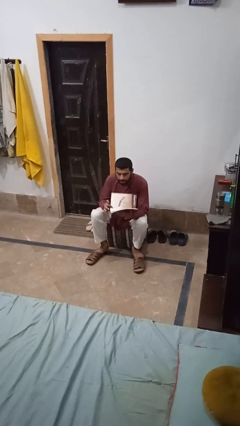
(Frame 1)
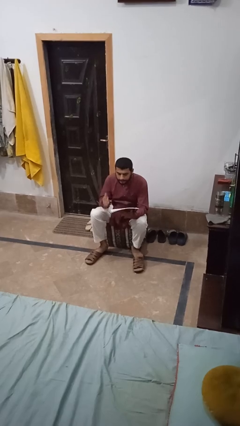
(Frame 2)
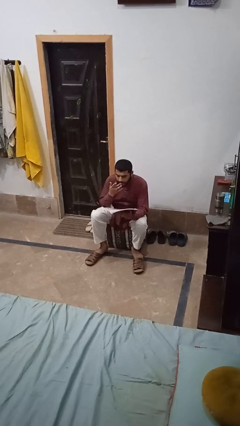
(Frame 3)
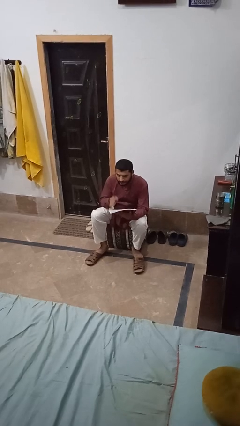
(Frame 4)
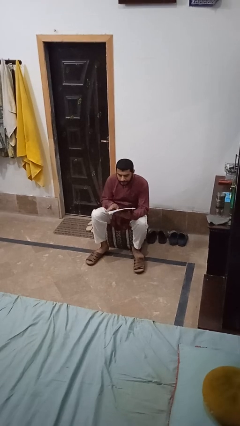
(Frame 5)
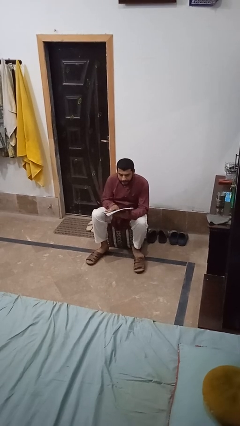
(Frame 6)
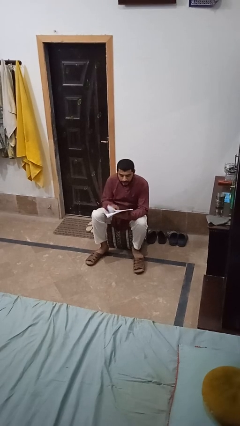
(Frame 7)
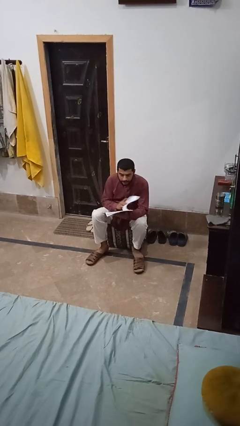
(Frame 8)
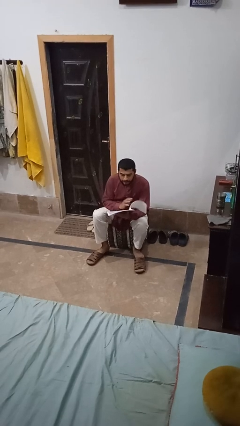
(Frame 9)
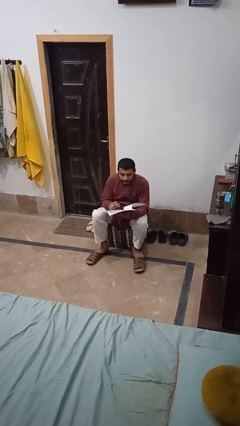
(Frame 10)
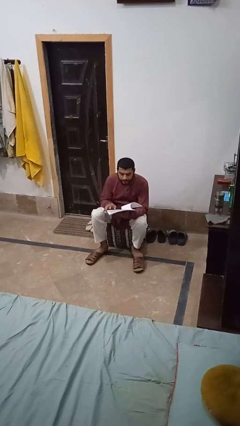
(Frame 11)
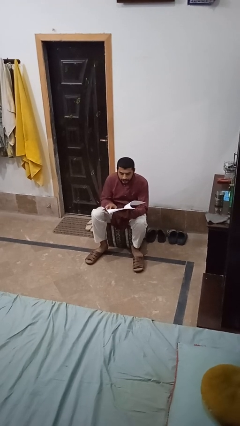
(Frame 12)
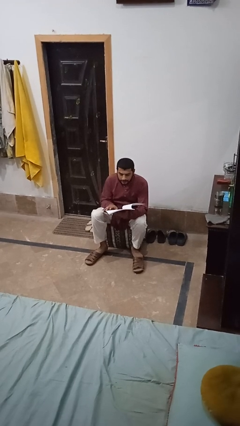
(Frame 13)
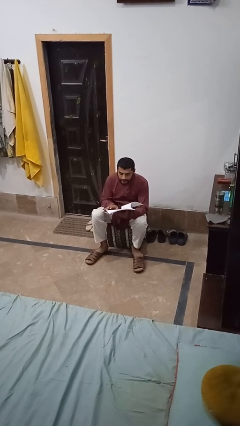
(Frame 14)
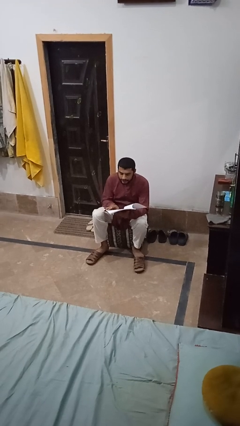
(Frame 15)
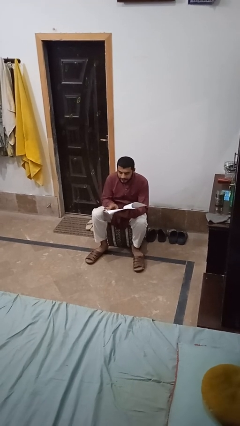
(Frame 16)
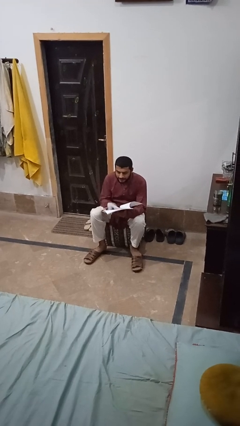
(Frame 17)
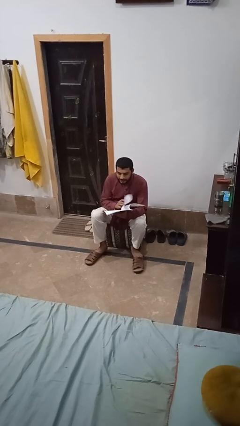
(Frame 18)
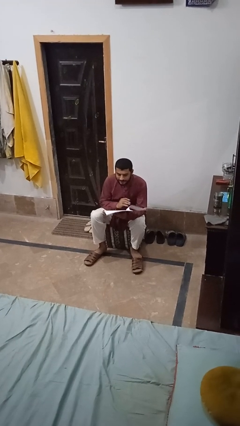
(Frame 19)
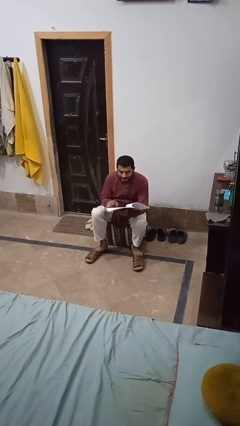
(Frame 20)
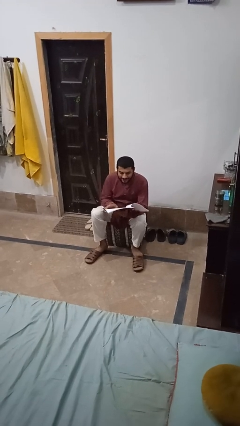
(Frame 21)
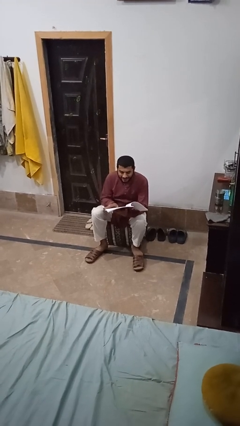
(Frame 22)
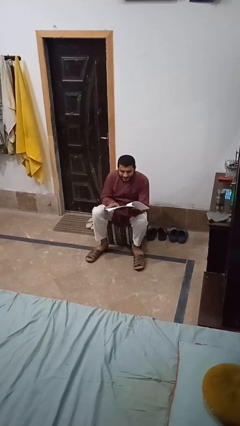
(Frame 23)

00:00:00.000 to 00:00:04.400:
person sits crisscross

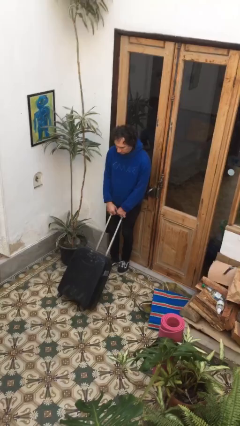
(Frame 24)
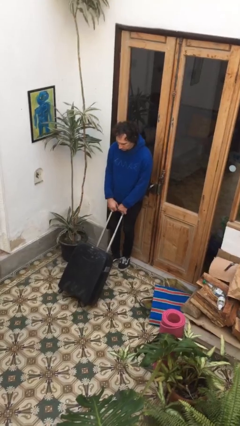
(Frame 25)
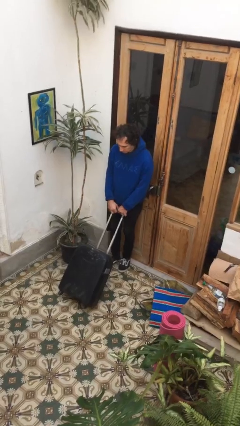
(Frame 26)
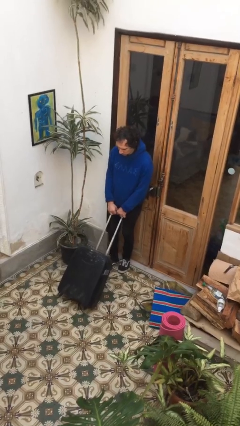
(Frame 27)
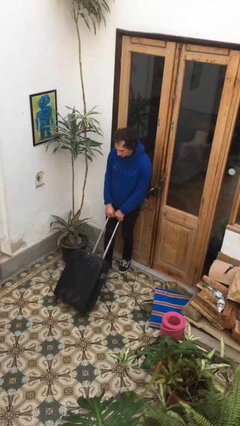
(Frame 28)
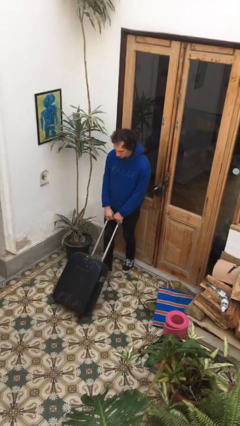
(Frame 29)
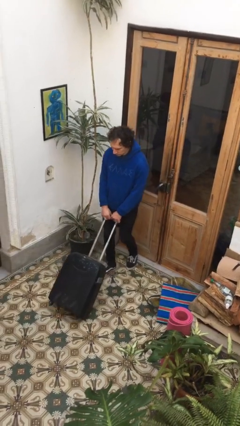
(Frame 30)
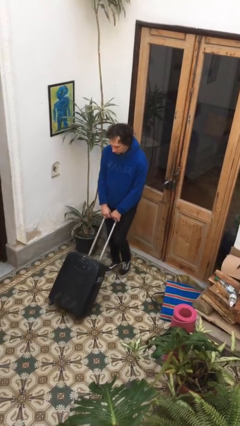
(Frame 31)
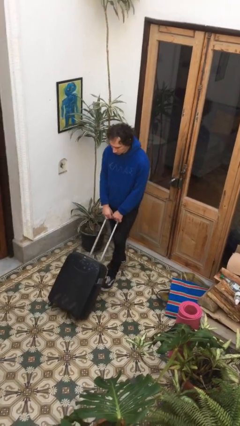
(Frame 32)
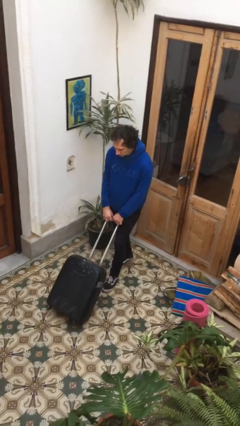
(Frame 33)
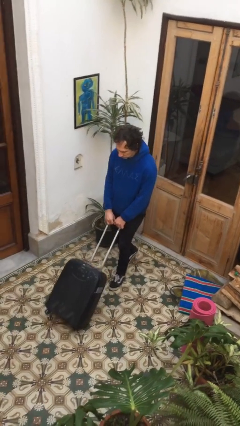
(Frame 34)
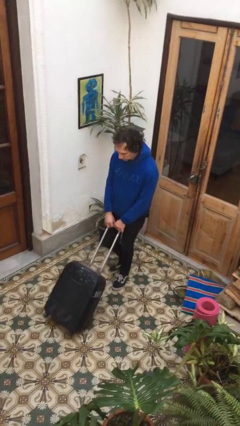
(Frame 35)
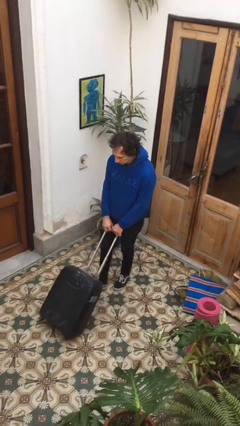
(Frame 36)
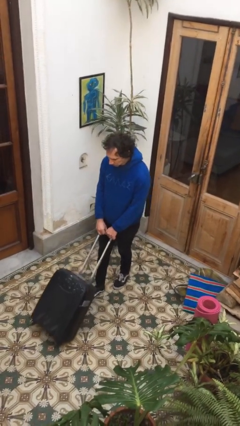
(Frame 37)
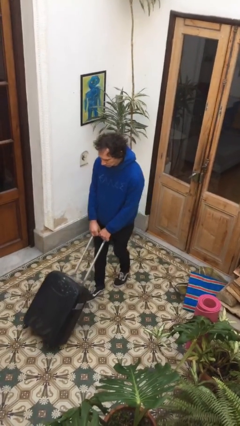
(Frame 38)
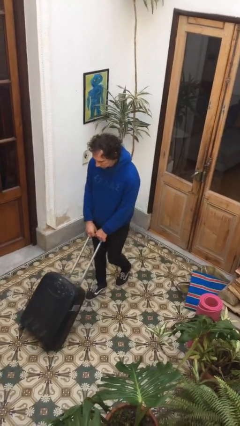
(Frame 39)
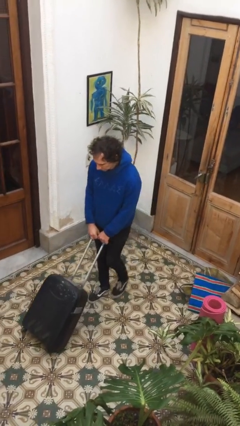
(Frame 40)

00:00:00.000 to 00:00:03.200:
person pushes wheeled cart

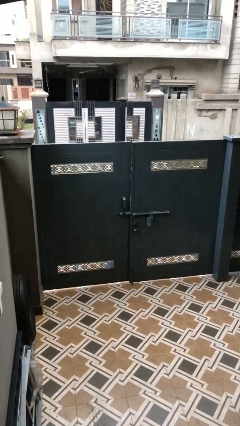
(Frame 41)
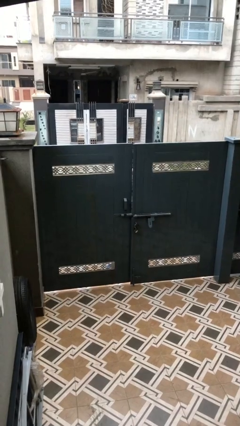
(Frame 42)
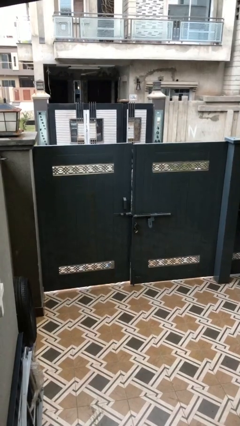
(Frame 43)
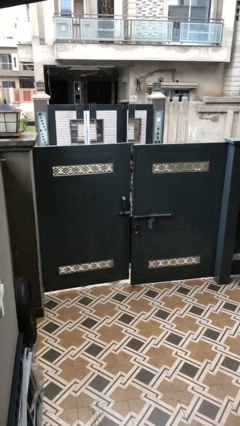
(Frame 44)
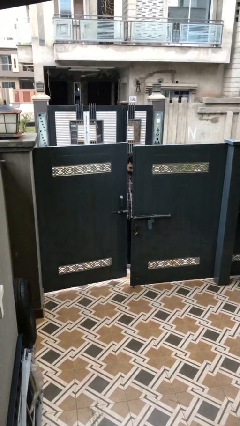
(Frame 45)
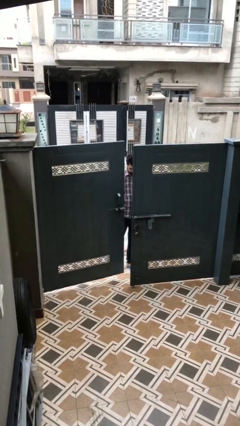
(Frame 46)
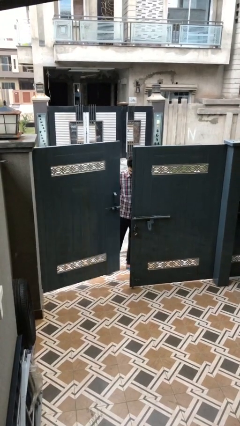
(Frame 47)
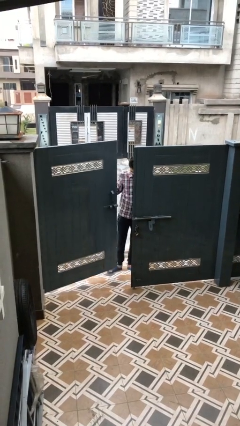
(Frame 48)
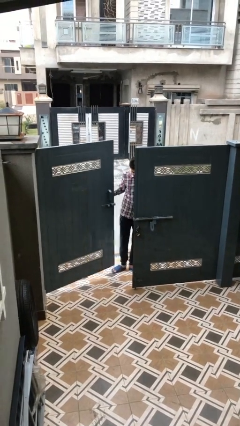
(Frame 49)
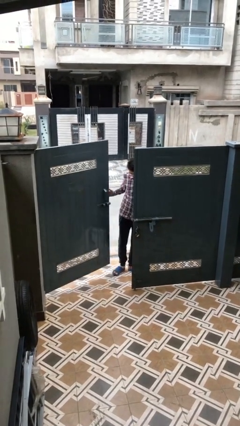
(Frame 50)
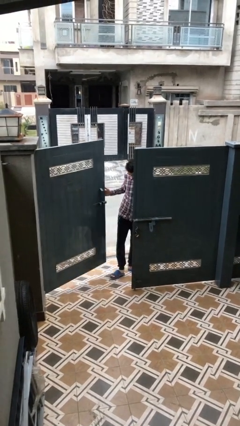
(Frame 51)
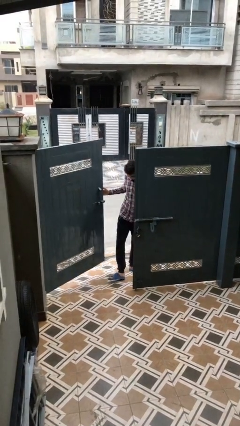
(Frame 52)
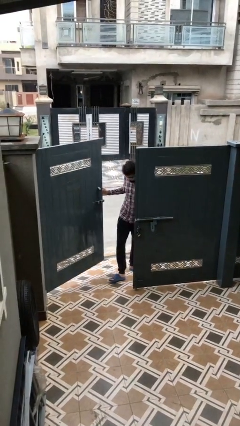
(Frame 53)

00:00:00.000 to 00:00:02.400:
person opens facility door

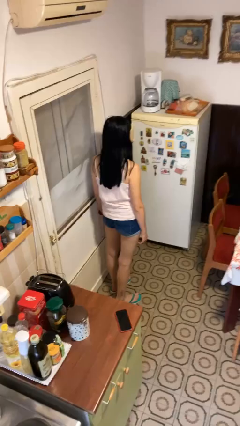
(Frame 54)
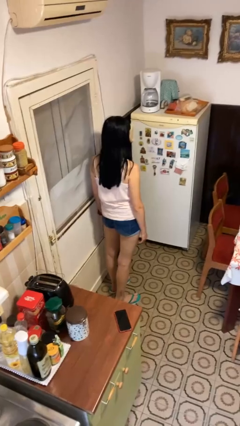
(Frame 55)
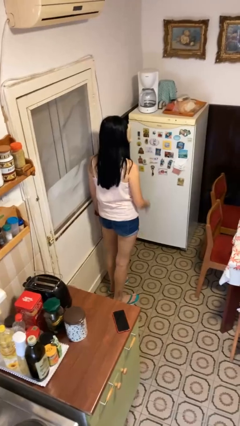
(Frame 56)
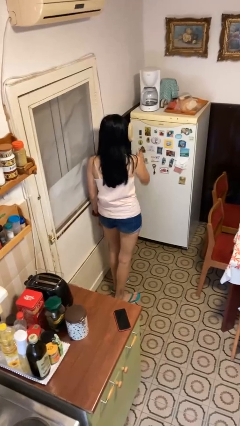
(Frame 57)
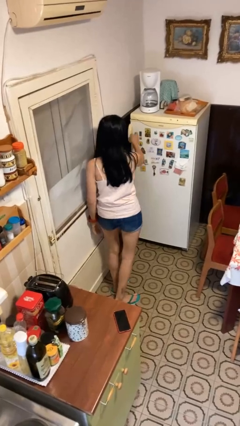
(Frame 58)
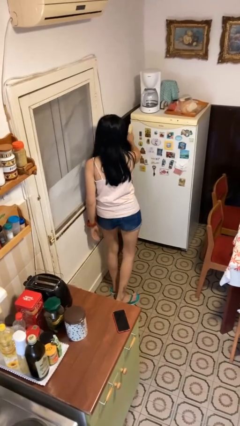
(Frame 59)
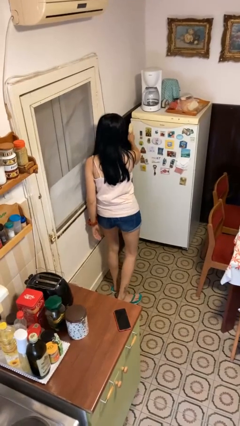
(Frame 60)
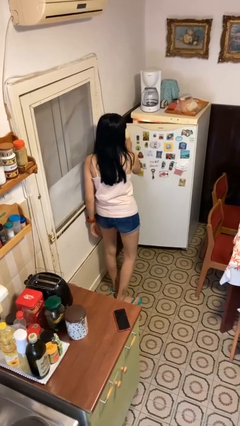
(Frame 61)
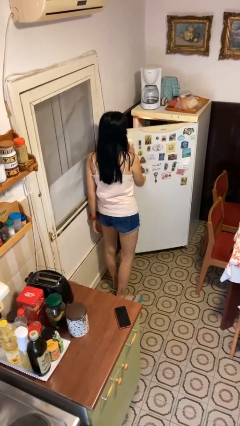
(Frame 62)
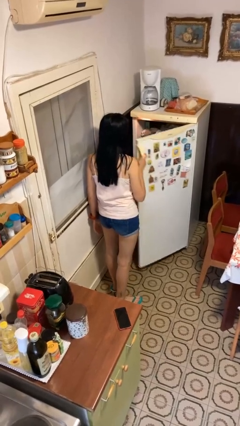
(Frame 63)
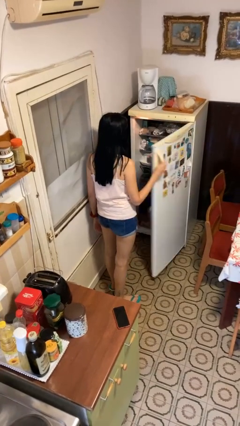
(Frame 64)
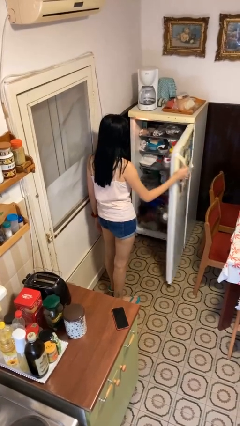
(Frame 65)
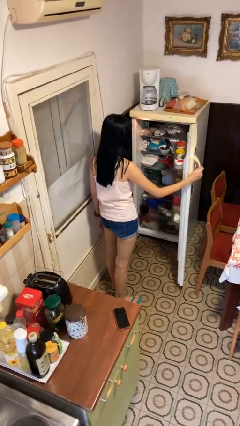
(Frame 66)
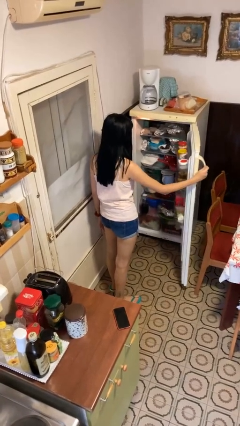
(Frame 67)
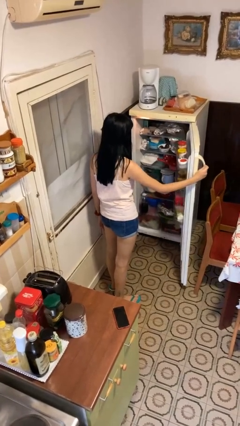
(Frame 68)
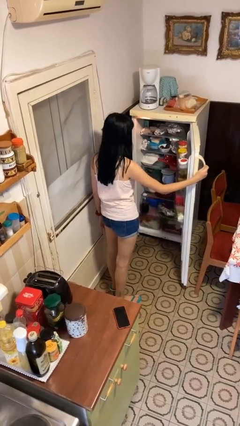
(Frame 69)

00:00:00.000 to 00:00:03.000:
person opens refrigerator

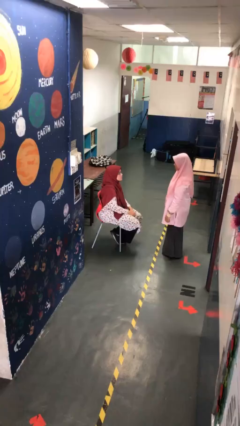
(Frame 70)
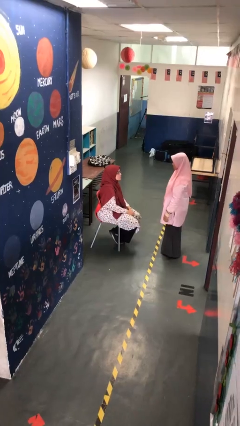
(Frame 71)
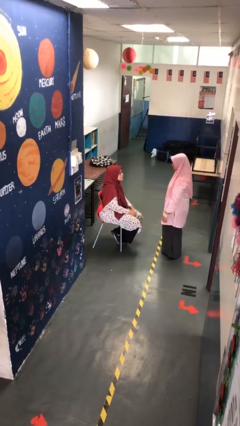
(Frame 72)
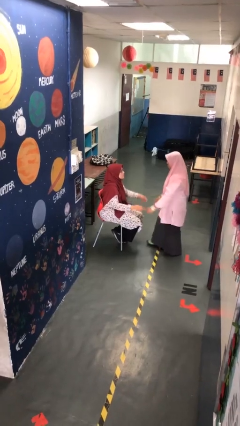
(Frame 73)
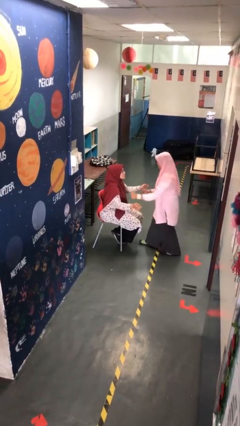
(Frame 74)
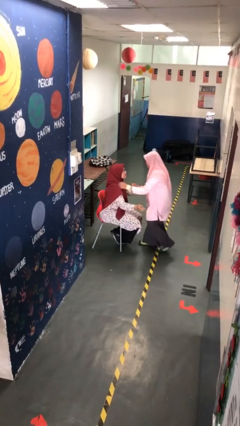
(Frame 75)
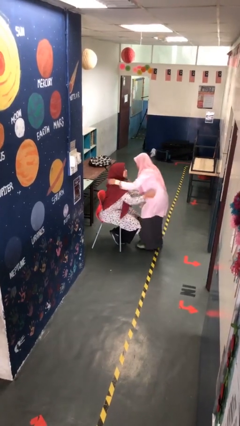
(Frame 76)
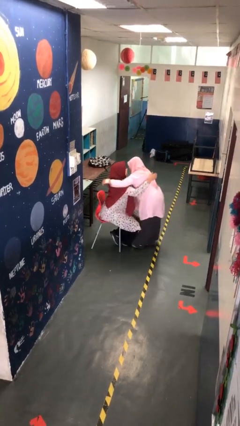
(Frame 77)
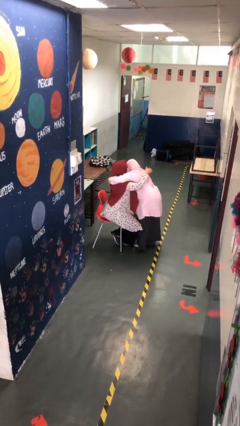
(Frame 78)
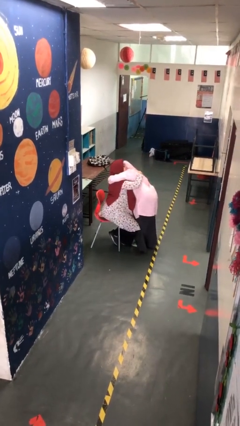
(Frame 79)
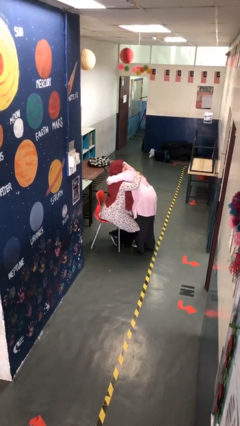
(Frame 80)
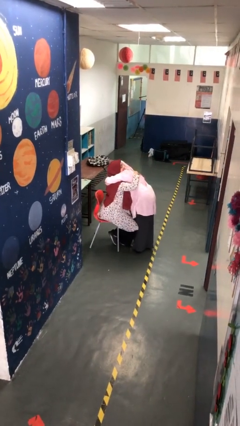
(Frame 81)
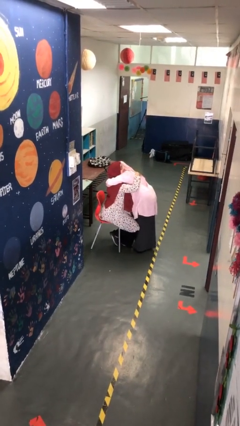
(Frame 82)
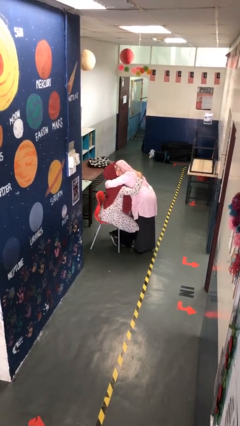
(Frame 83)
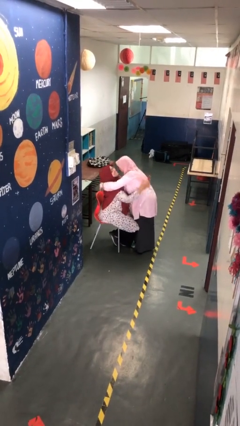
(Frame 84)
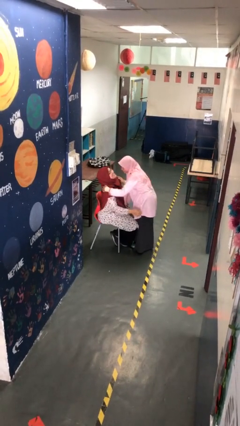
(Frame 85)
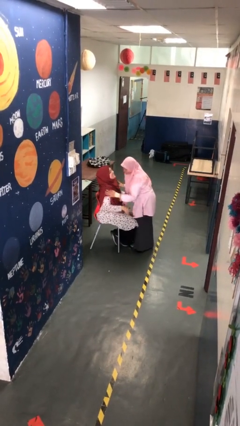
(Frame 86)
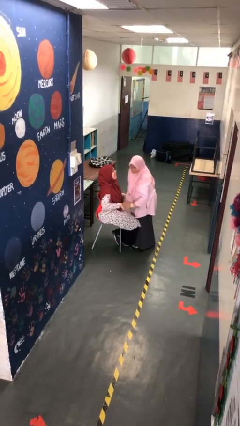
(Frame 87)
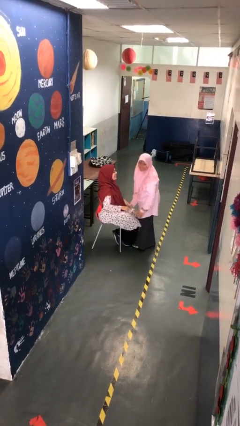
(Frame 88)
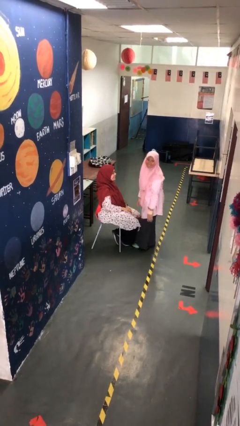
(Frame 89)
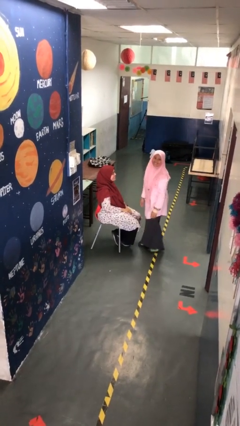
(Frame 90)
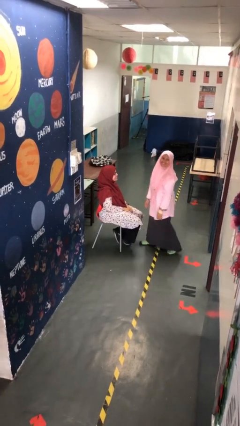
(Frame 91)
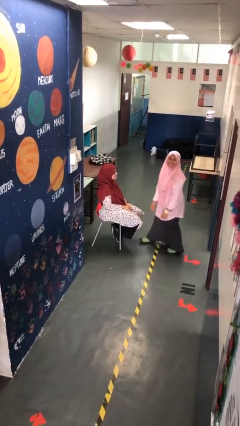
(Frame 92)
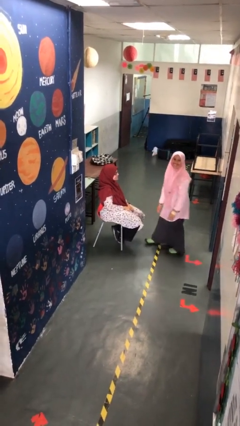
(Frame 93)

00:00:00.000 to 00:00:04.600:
person embraces person

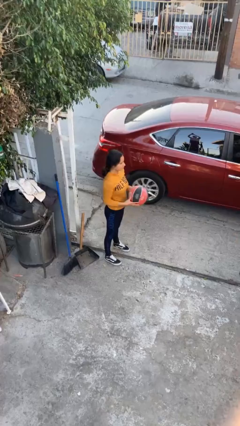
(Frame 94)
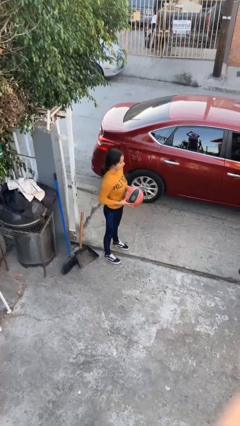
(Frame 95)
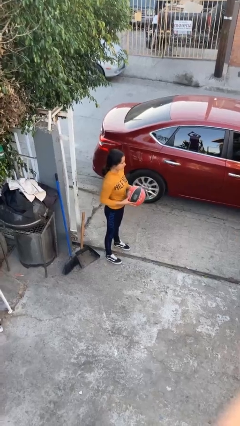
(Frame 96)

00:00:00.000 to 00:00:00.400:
person catches object from person
